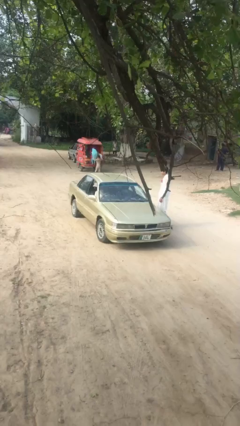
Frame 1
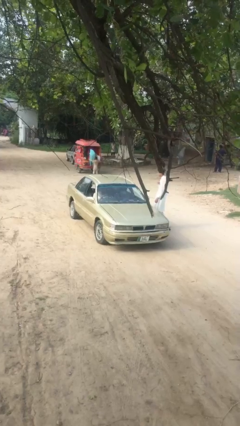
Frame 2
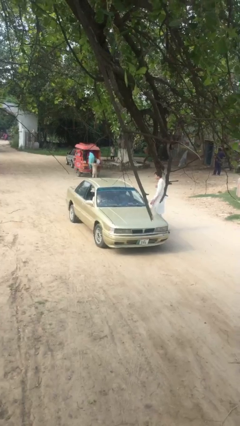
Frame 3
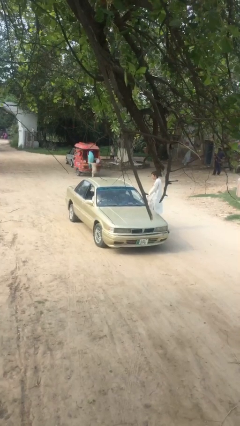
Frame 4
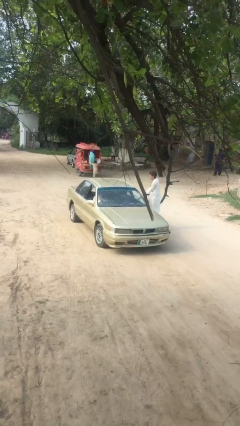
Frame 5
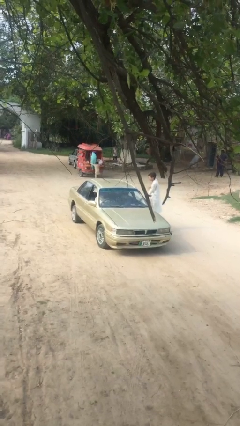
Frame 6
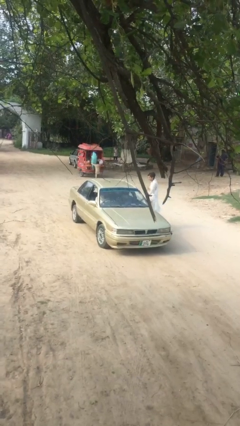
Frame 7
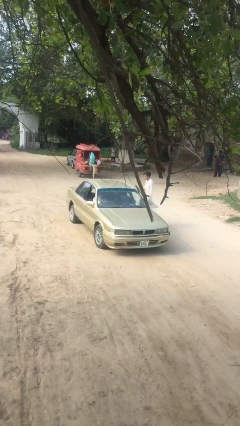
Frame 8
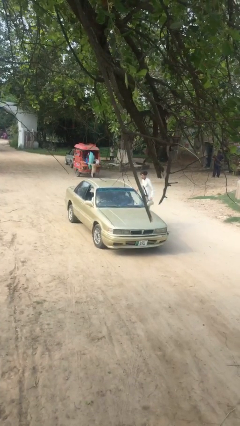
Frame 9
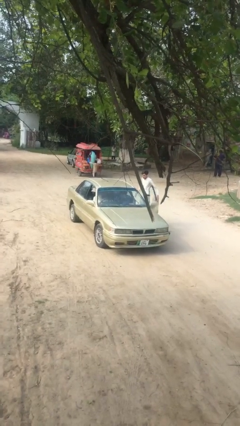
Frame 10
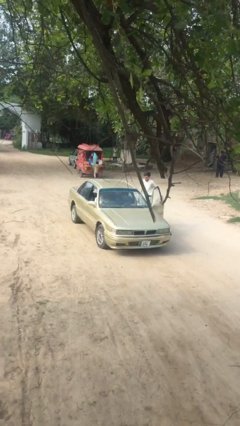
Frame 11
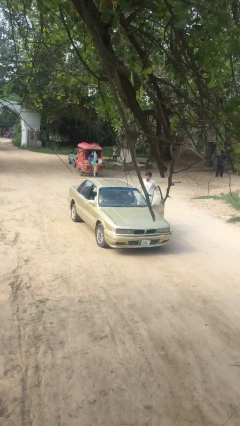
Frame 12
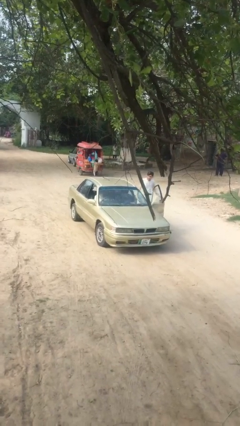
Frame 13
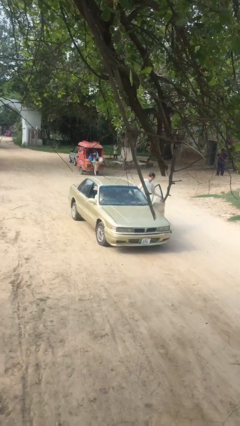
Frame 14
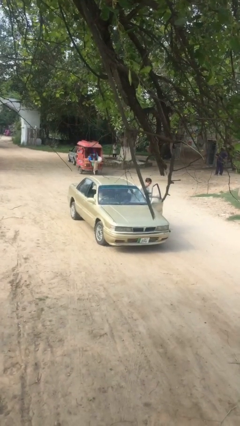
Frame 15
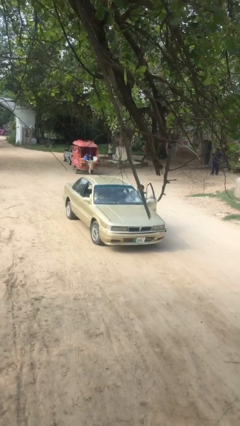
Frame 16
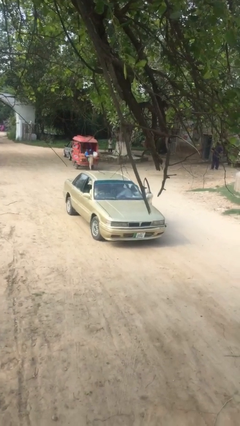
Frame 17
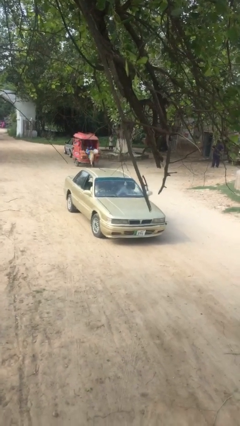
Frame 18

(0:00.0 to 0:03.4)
car picks up person

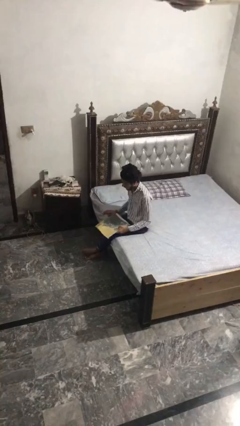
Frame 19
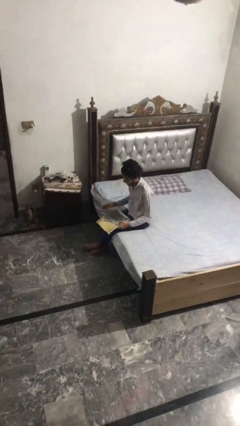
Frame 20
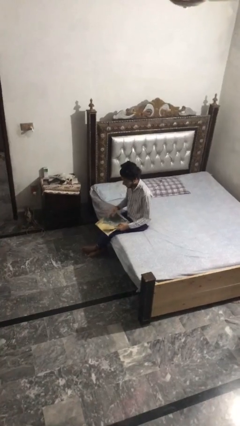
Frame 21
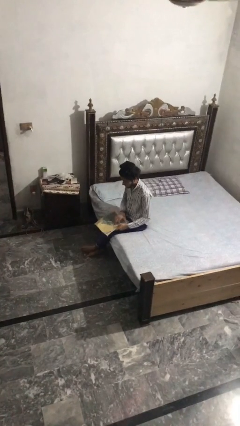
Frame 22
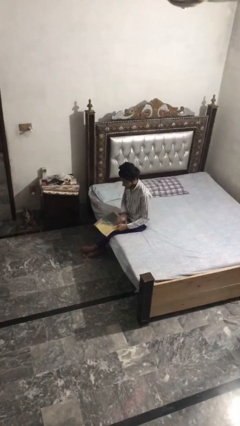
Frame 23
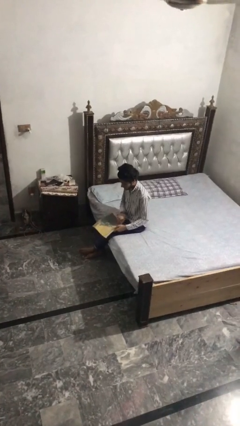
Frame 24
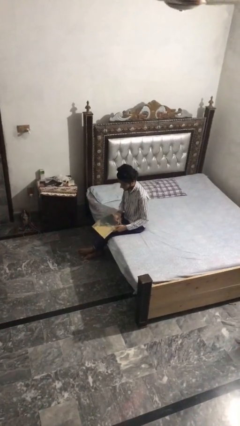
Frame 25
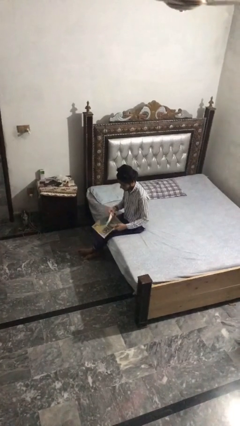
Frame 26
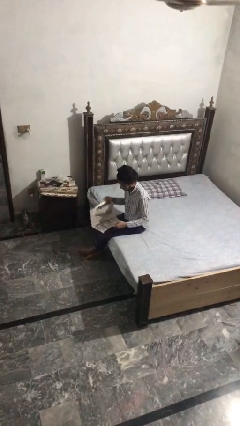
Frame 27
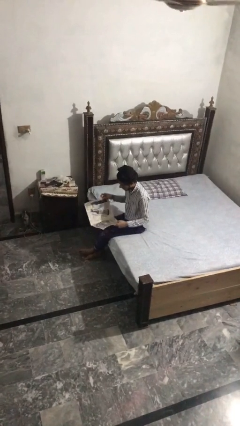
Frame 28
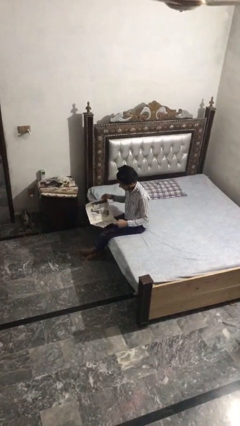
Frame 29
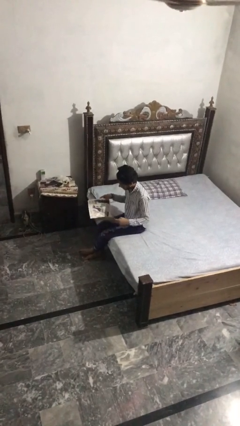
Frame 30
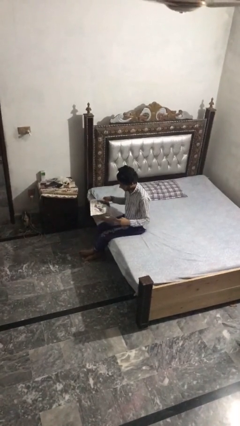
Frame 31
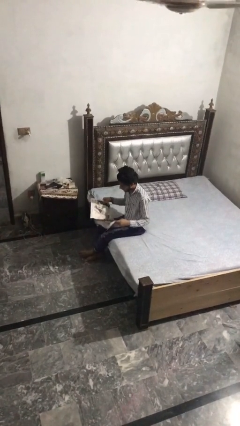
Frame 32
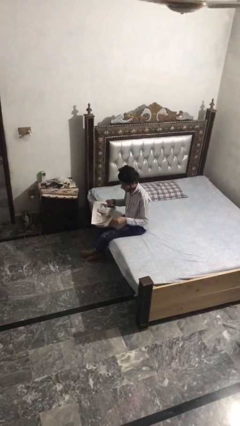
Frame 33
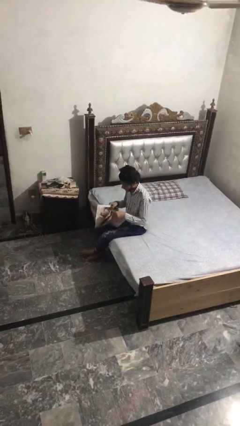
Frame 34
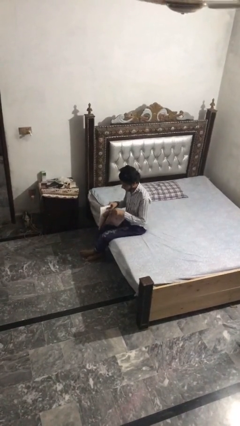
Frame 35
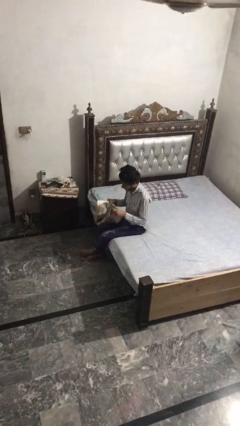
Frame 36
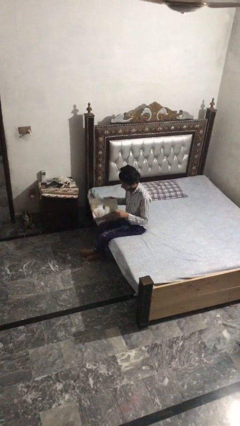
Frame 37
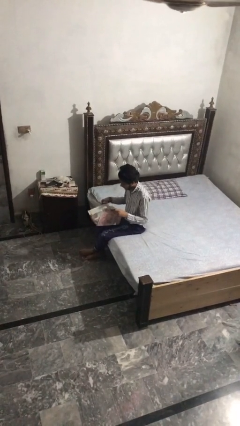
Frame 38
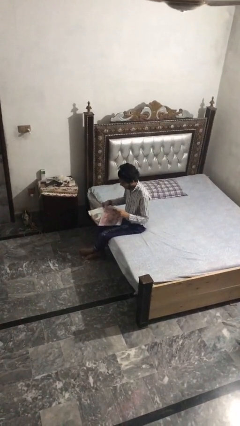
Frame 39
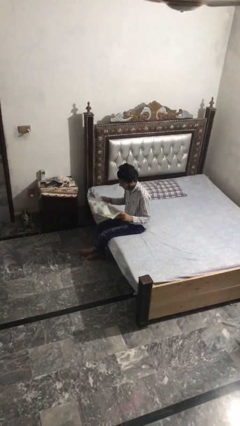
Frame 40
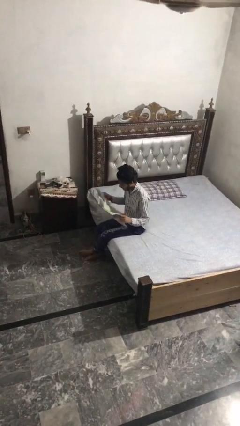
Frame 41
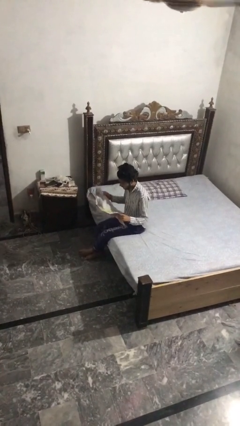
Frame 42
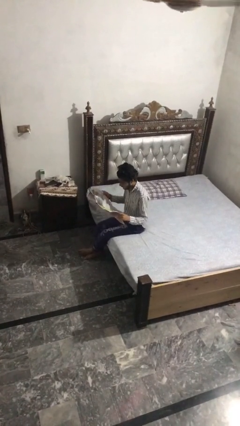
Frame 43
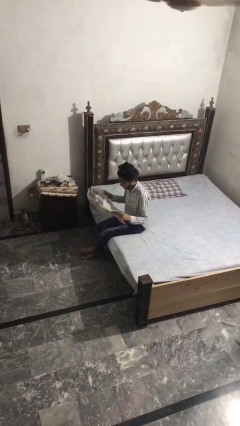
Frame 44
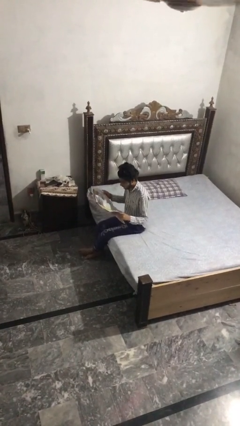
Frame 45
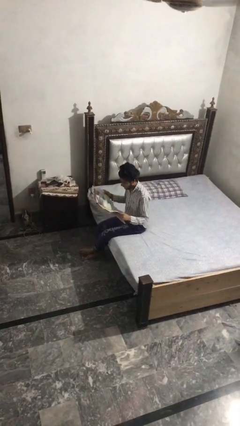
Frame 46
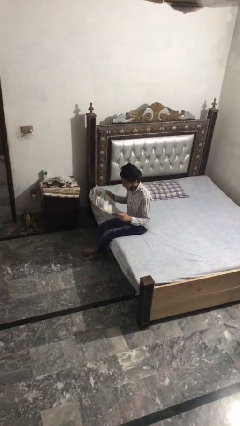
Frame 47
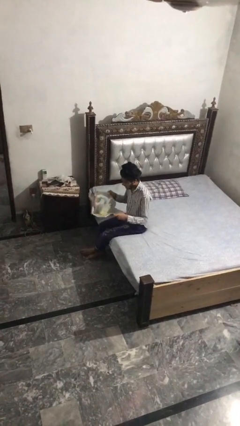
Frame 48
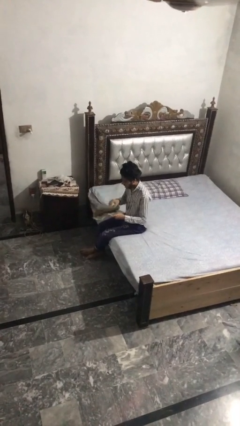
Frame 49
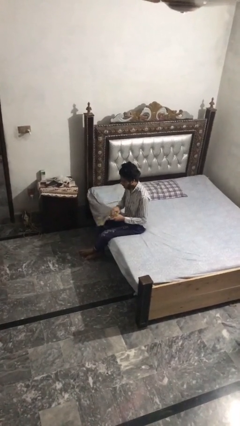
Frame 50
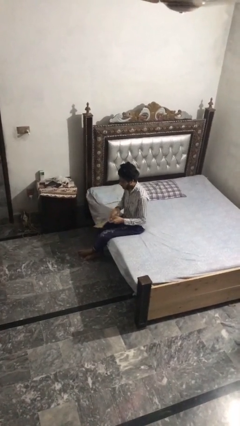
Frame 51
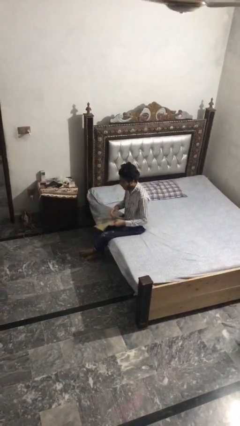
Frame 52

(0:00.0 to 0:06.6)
person reads magazine

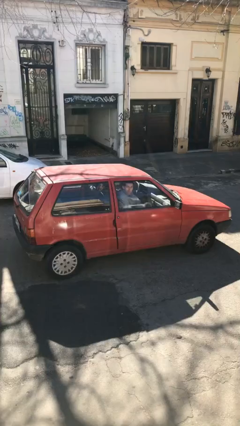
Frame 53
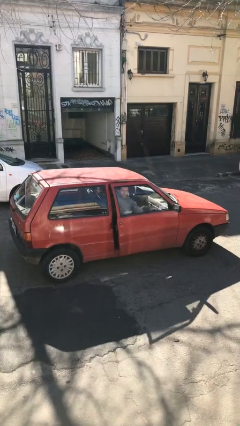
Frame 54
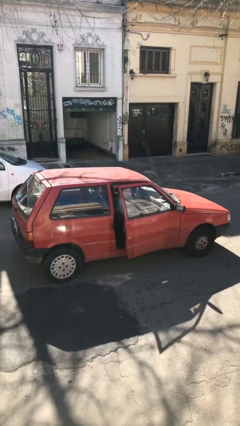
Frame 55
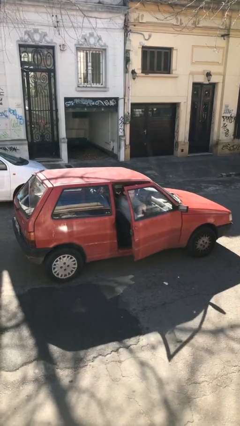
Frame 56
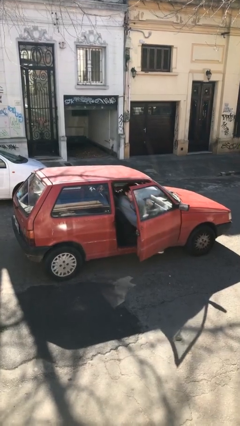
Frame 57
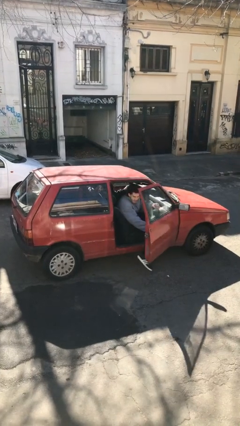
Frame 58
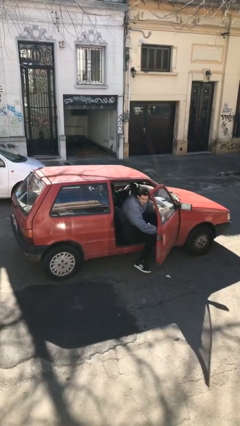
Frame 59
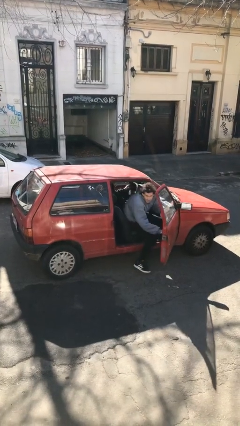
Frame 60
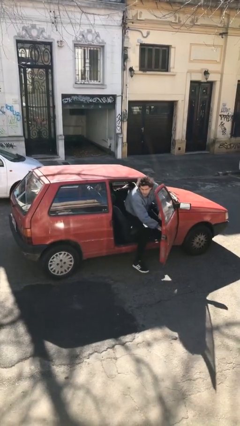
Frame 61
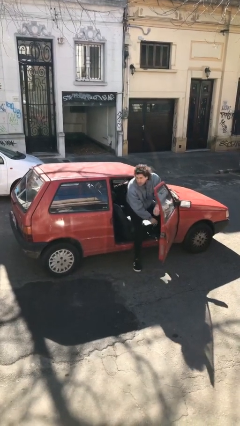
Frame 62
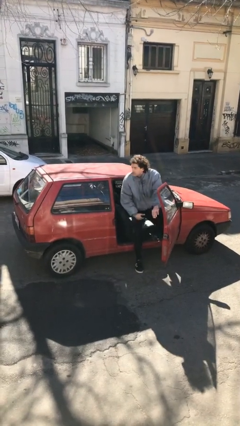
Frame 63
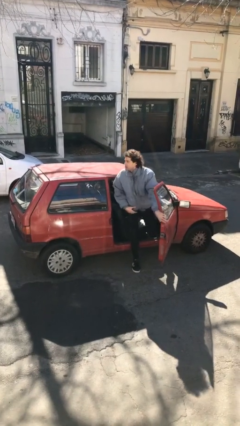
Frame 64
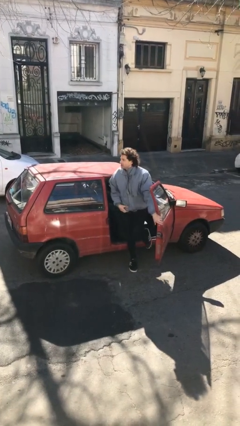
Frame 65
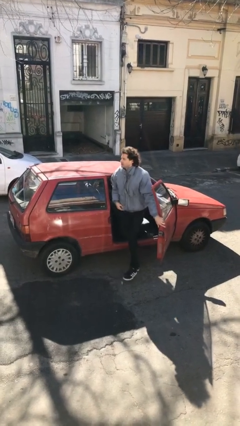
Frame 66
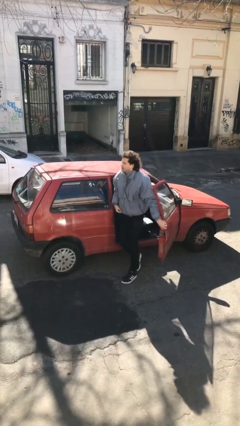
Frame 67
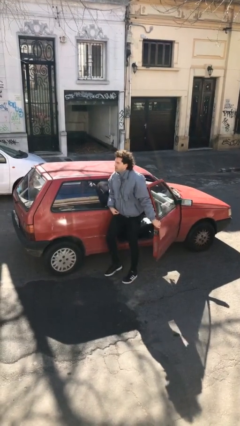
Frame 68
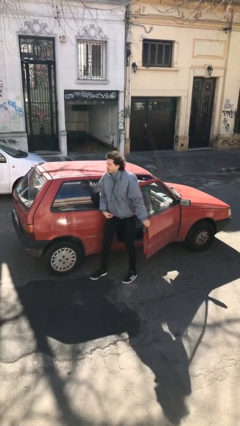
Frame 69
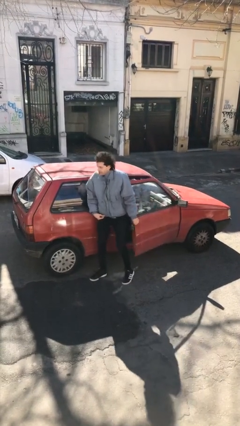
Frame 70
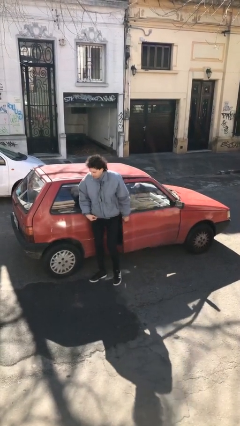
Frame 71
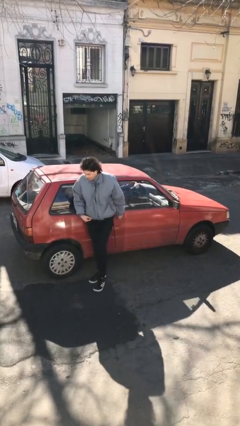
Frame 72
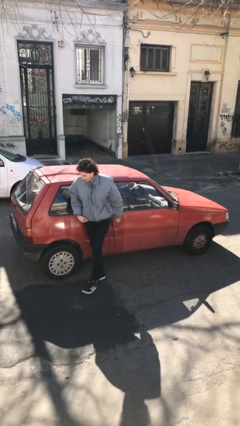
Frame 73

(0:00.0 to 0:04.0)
car drops off person

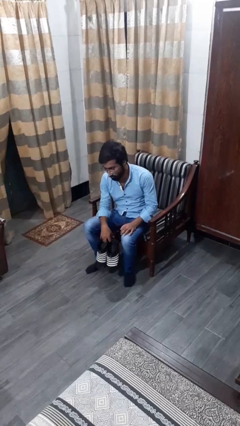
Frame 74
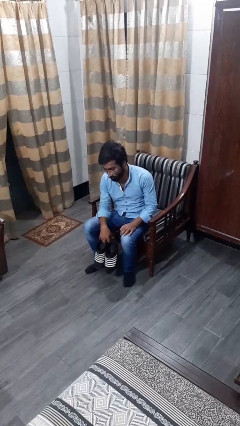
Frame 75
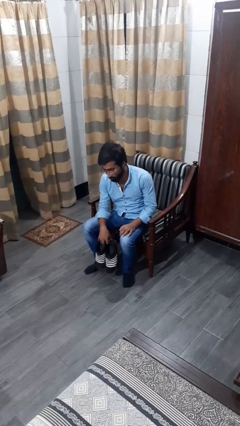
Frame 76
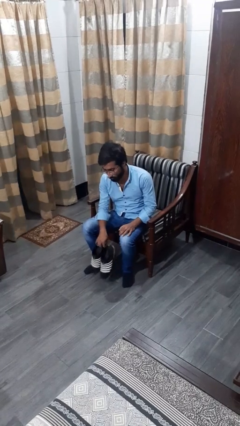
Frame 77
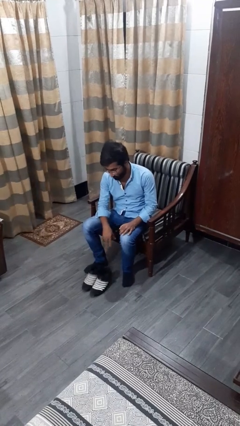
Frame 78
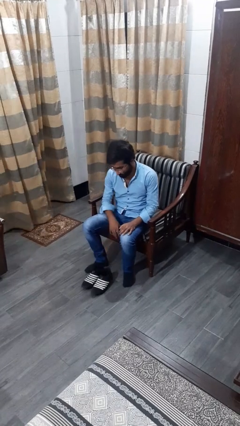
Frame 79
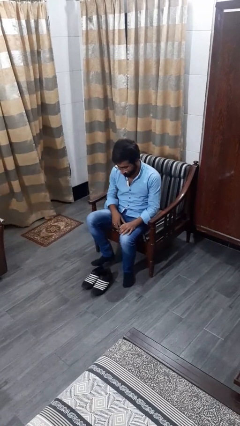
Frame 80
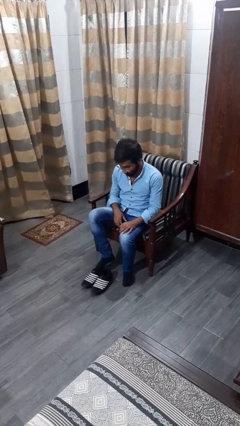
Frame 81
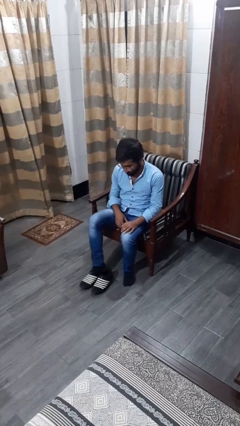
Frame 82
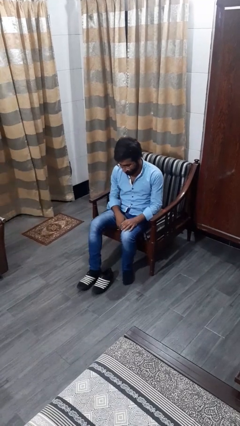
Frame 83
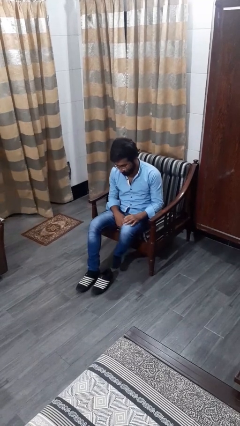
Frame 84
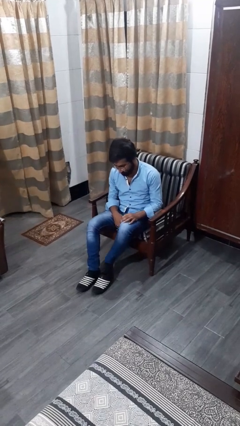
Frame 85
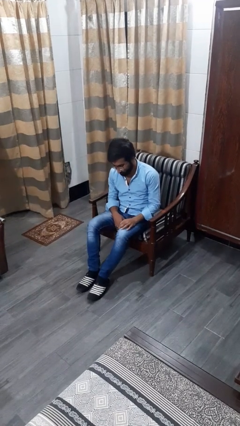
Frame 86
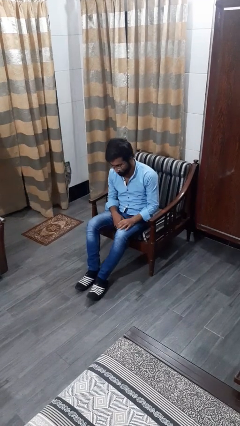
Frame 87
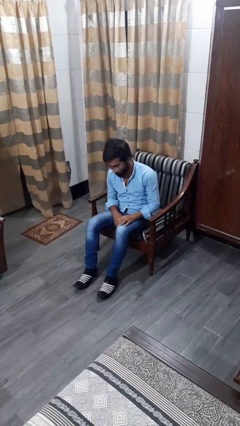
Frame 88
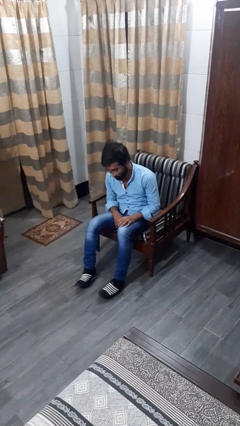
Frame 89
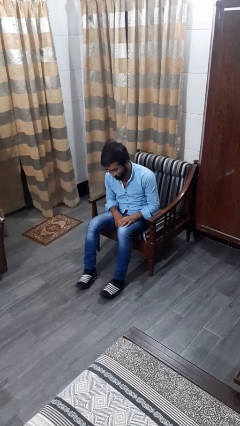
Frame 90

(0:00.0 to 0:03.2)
person puts on shoes

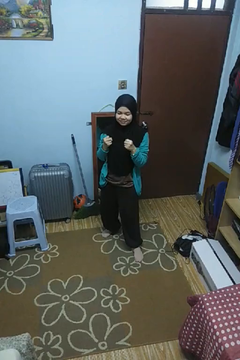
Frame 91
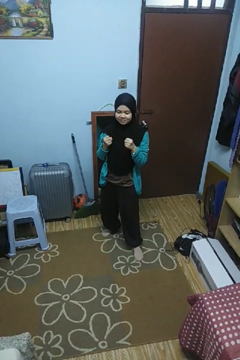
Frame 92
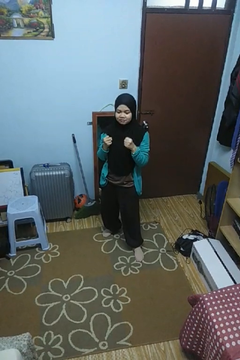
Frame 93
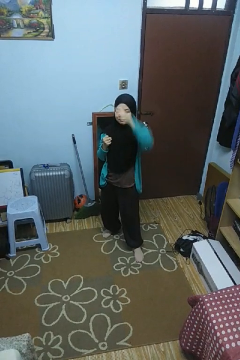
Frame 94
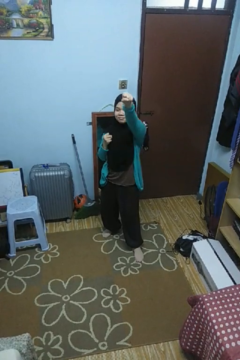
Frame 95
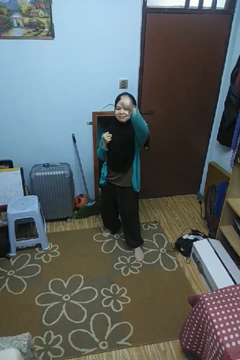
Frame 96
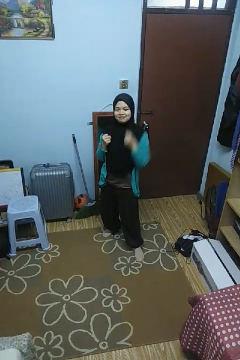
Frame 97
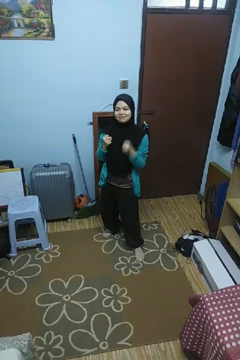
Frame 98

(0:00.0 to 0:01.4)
person punches
